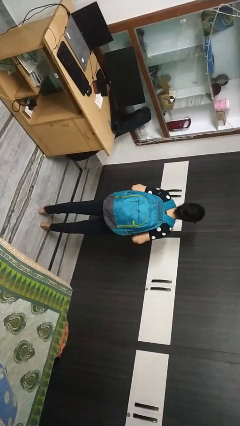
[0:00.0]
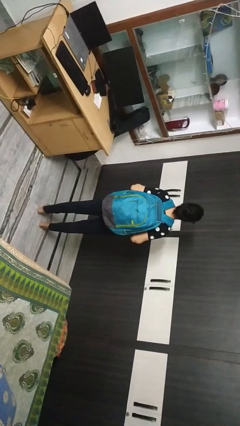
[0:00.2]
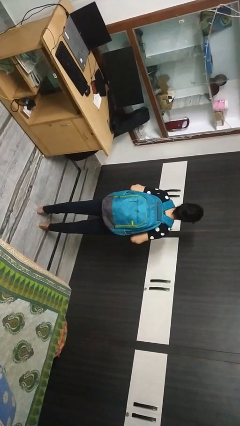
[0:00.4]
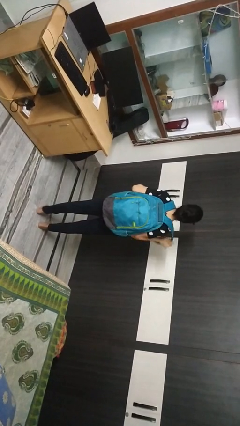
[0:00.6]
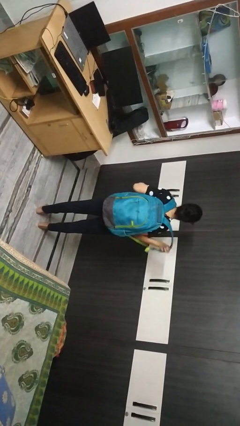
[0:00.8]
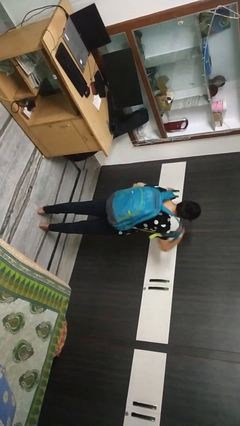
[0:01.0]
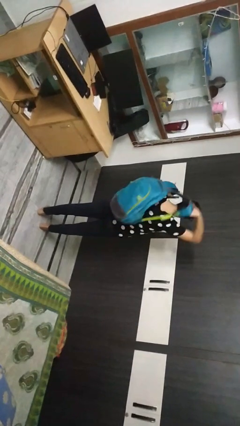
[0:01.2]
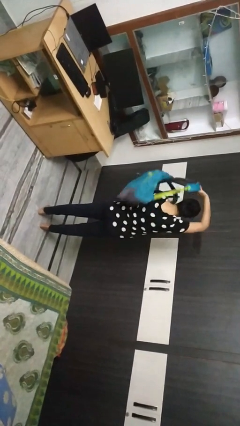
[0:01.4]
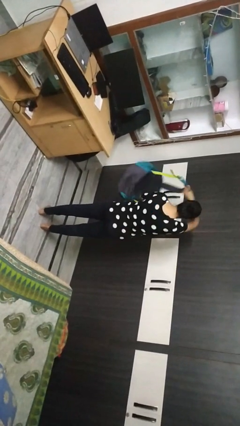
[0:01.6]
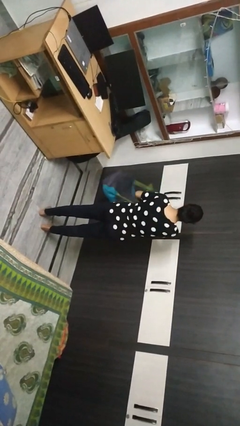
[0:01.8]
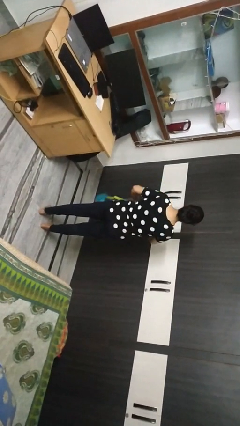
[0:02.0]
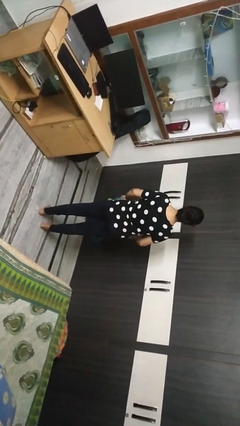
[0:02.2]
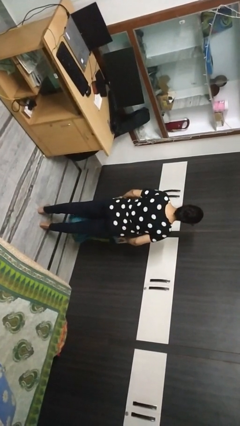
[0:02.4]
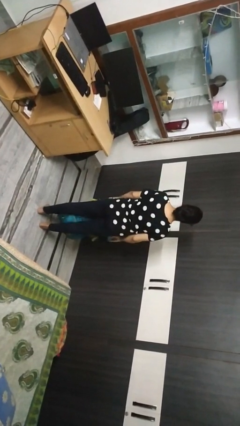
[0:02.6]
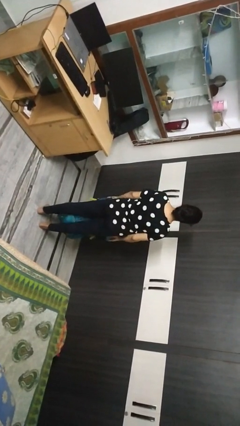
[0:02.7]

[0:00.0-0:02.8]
person takes off backpack

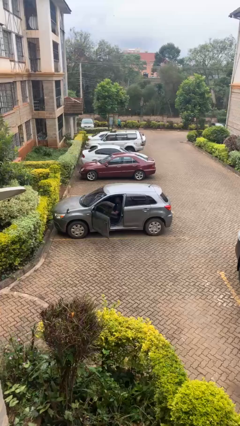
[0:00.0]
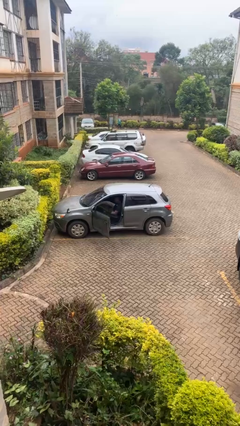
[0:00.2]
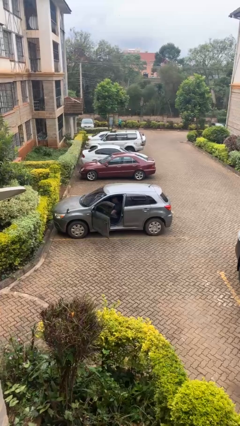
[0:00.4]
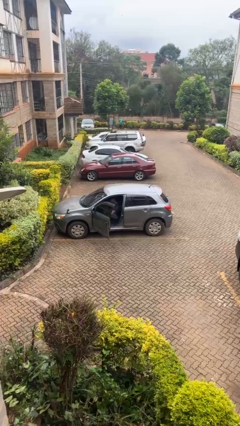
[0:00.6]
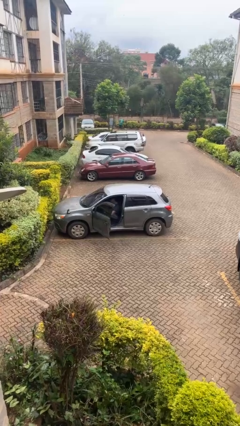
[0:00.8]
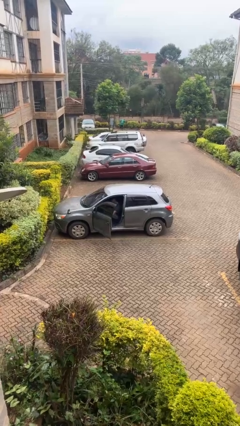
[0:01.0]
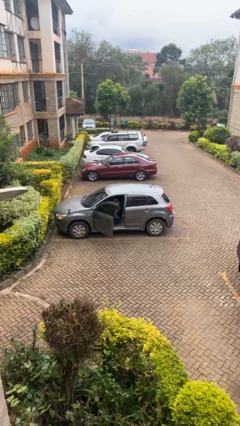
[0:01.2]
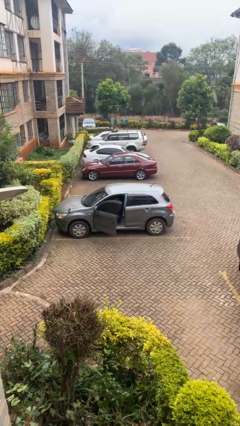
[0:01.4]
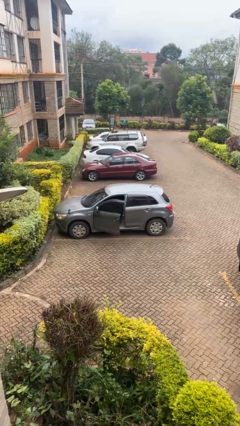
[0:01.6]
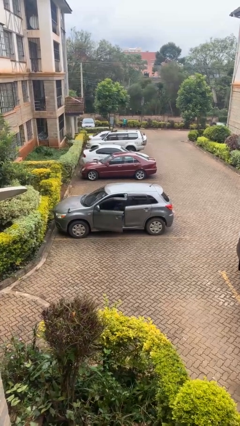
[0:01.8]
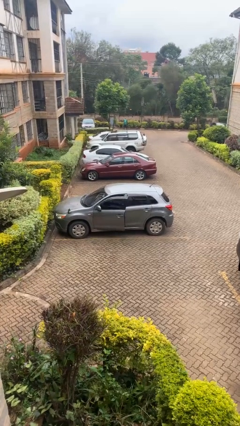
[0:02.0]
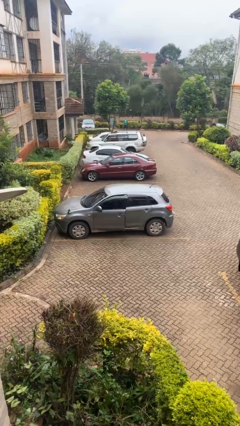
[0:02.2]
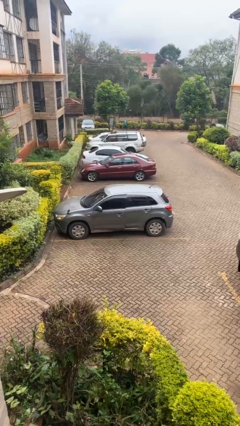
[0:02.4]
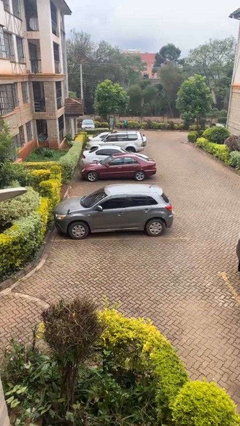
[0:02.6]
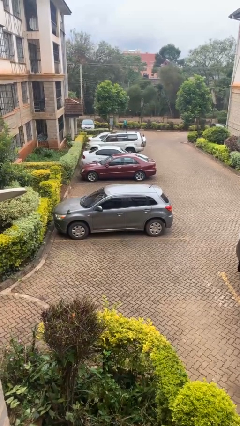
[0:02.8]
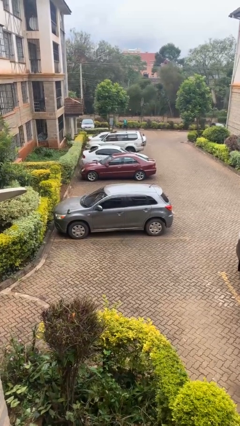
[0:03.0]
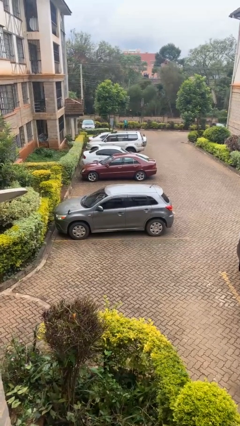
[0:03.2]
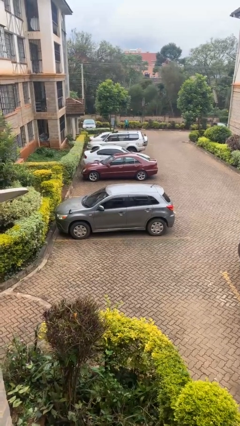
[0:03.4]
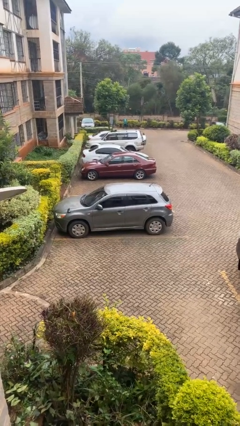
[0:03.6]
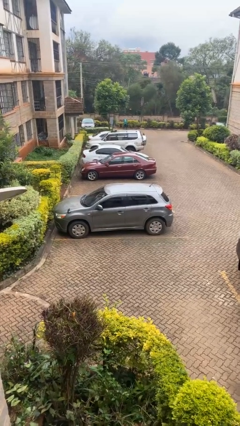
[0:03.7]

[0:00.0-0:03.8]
person closes car door

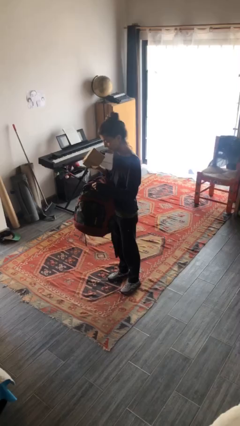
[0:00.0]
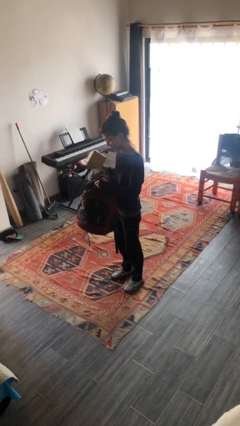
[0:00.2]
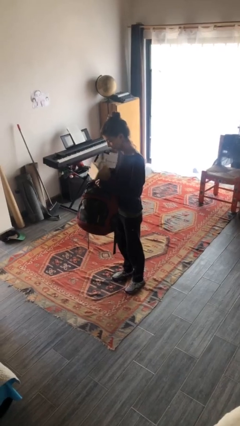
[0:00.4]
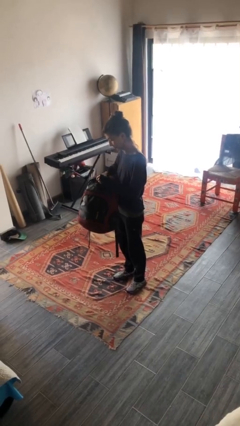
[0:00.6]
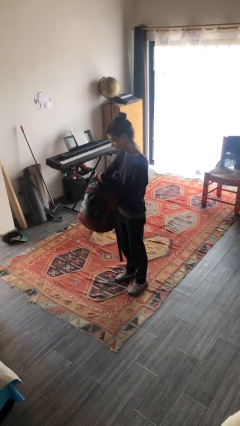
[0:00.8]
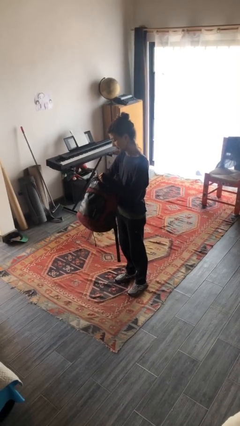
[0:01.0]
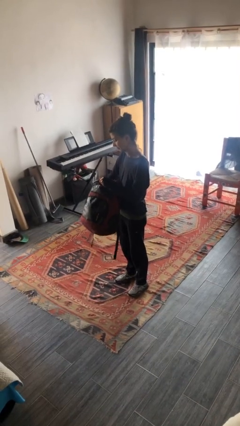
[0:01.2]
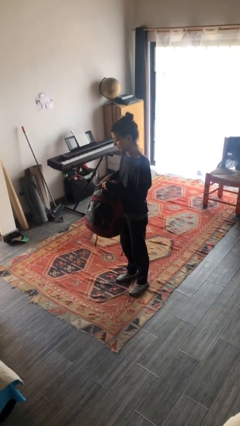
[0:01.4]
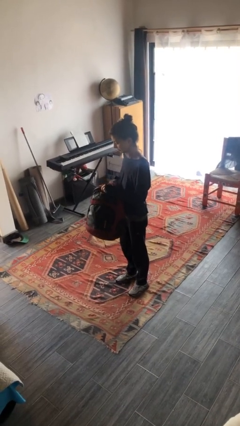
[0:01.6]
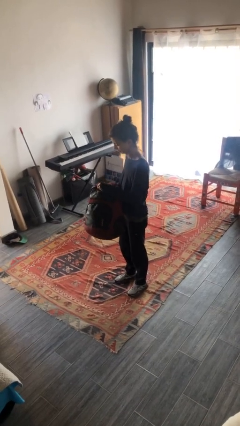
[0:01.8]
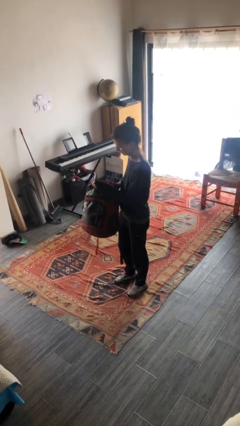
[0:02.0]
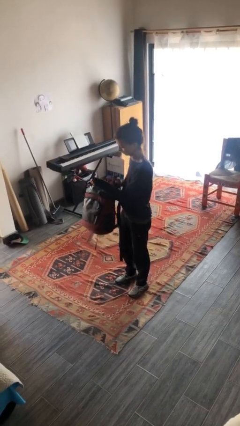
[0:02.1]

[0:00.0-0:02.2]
person puts object into backpack

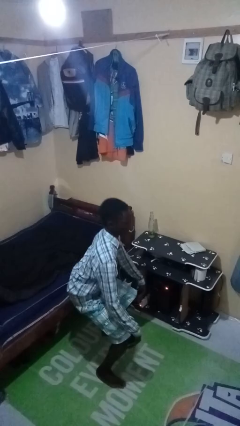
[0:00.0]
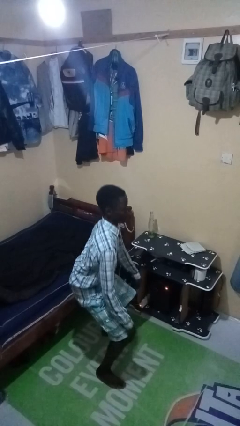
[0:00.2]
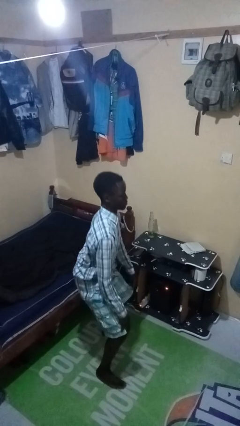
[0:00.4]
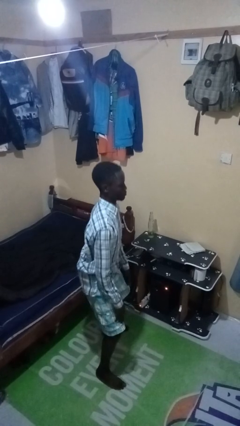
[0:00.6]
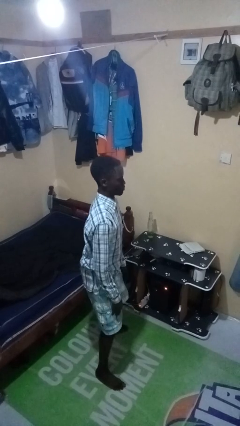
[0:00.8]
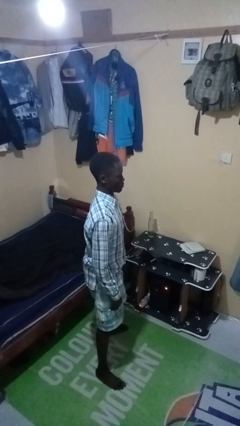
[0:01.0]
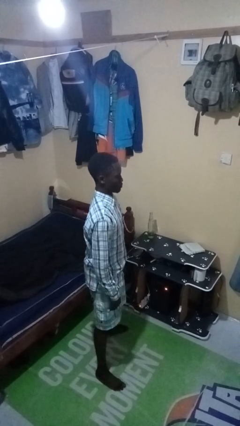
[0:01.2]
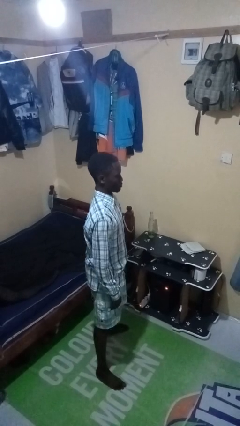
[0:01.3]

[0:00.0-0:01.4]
person stands up

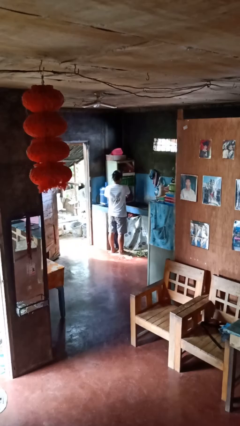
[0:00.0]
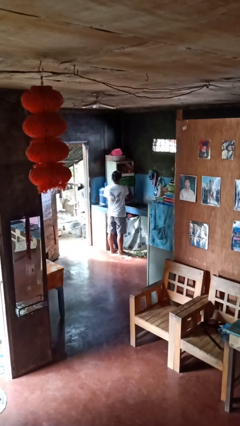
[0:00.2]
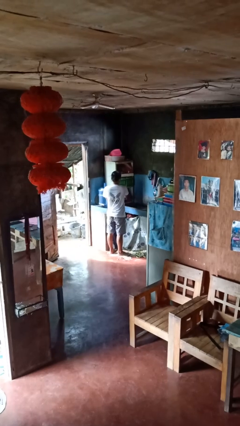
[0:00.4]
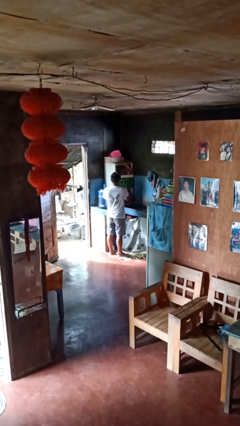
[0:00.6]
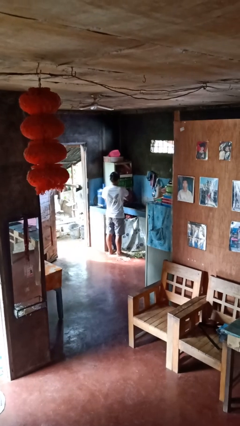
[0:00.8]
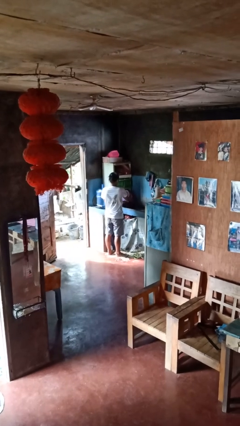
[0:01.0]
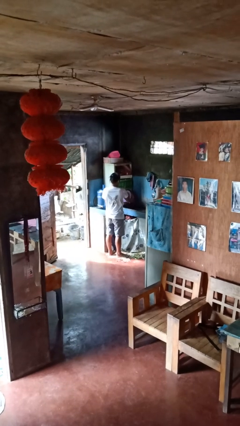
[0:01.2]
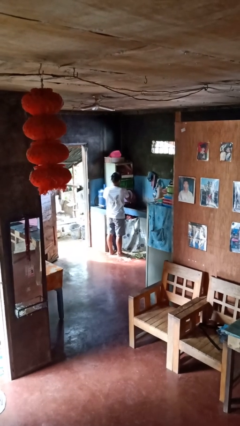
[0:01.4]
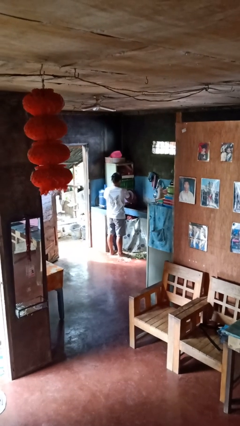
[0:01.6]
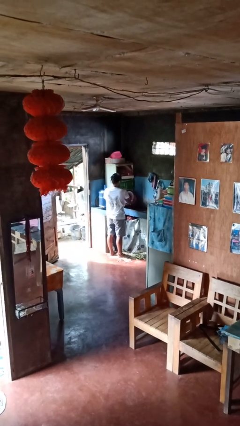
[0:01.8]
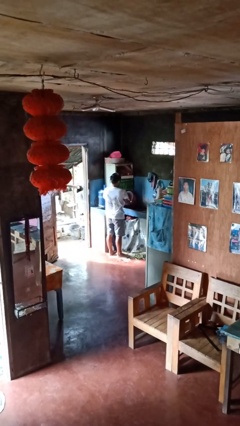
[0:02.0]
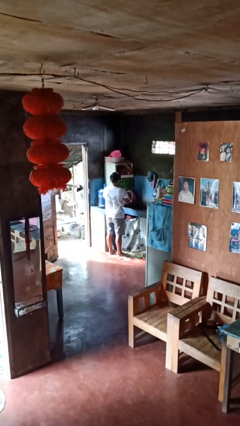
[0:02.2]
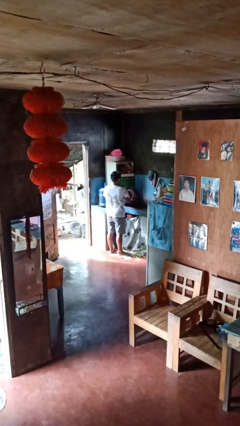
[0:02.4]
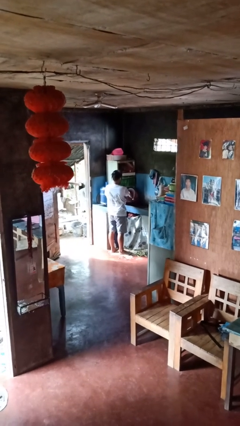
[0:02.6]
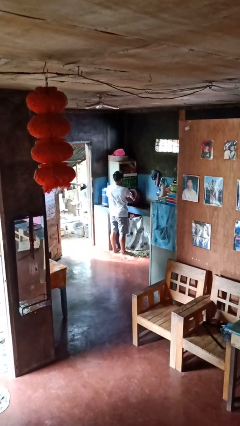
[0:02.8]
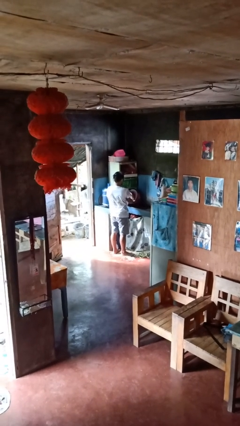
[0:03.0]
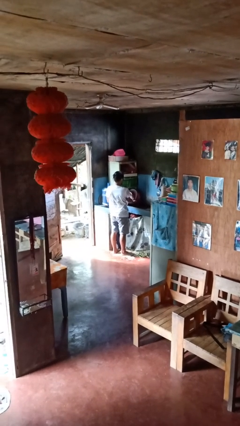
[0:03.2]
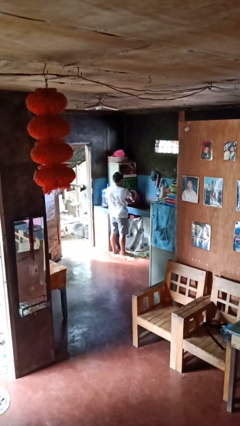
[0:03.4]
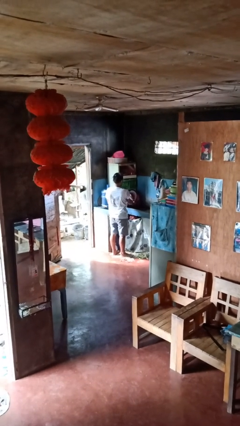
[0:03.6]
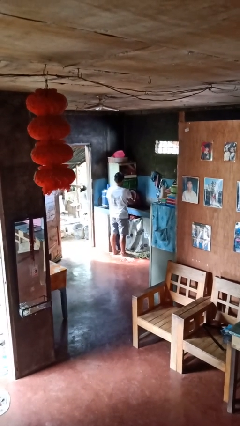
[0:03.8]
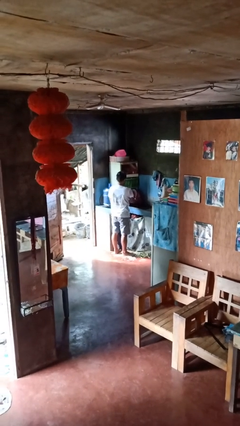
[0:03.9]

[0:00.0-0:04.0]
person opens dishwasher

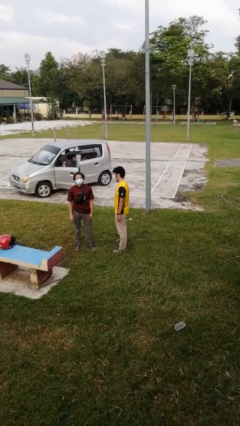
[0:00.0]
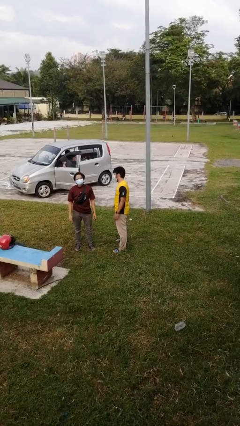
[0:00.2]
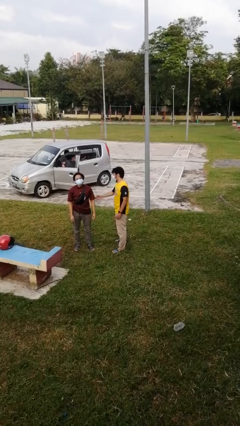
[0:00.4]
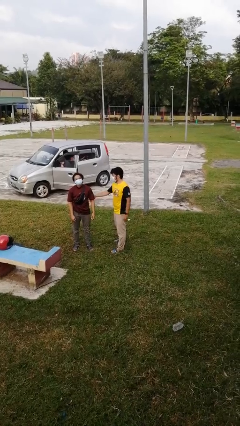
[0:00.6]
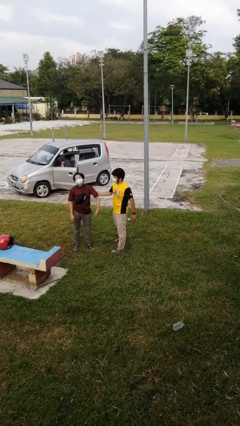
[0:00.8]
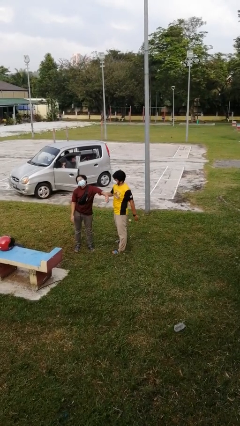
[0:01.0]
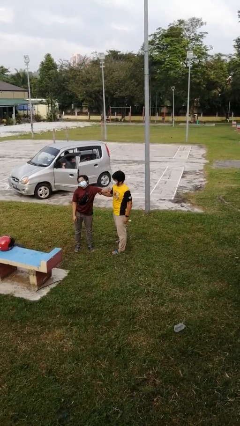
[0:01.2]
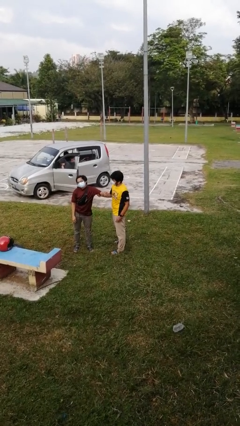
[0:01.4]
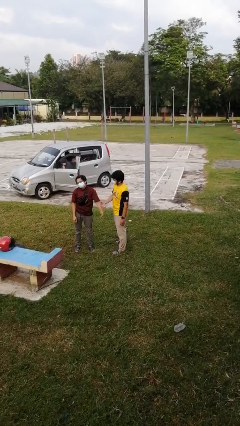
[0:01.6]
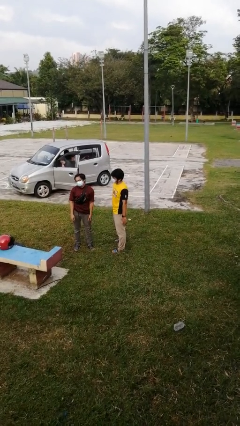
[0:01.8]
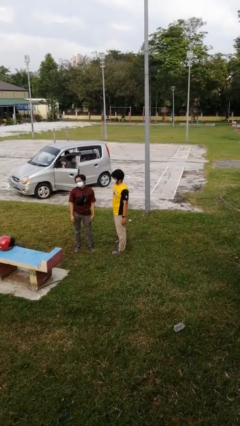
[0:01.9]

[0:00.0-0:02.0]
person grabs person by bicep

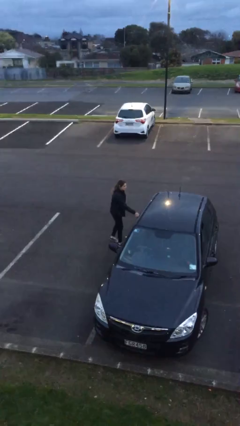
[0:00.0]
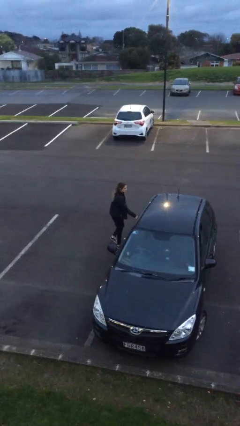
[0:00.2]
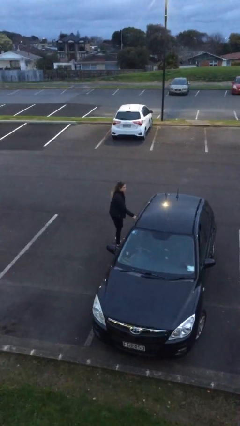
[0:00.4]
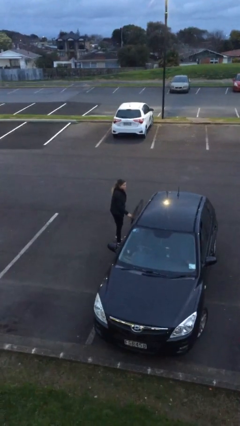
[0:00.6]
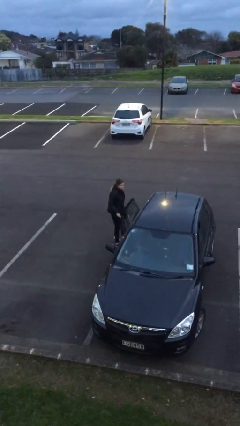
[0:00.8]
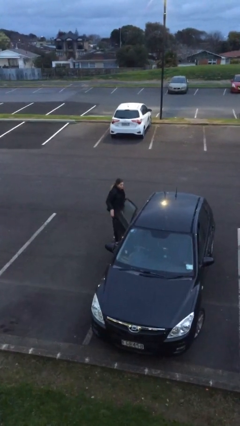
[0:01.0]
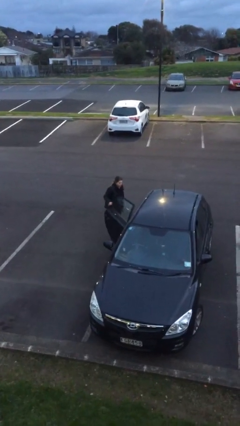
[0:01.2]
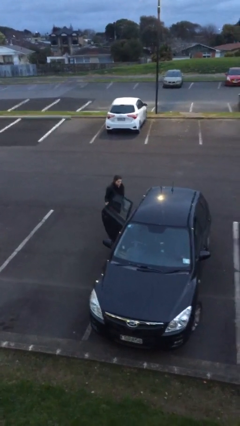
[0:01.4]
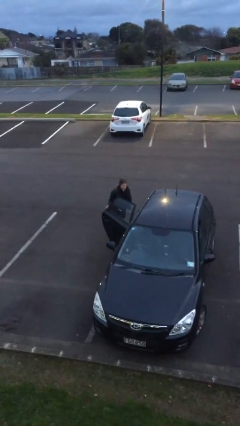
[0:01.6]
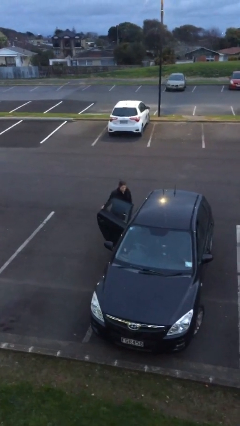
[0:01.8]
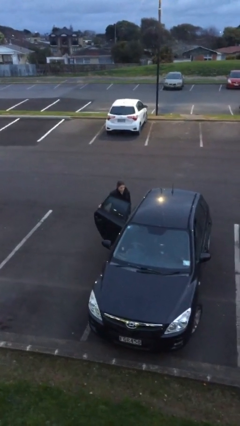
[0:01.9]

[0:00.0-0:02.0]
person opens car door
